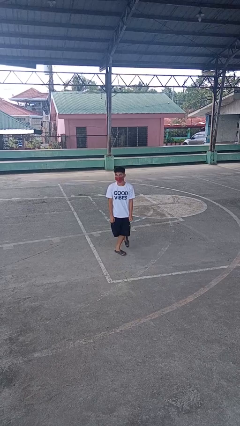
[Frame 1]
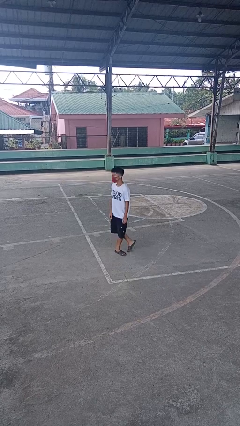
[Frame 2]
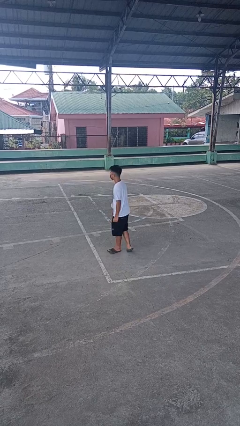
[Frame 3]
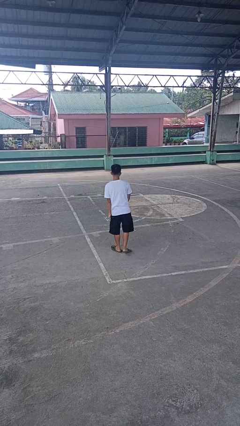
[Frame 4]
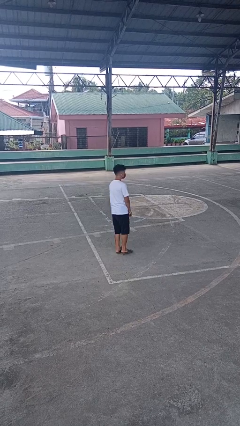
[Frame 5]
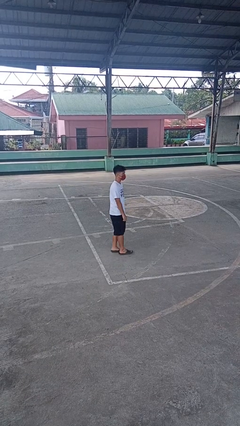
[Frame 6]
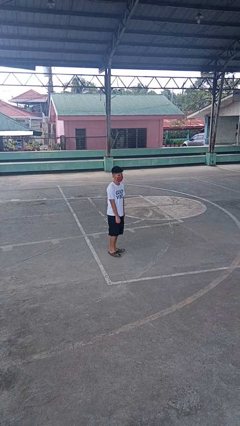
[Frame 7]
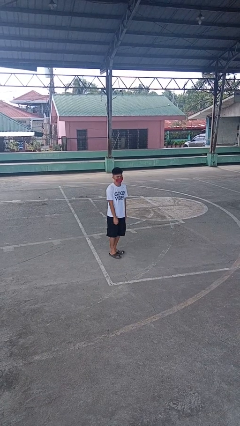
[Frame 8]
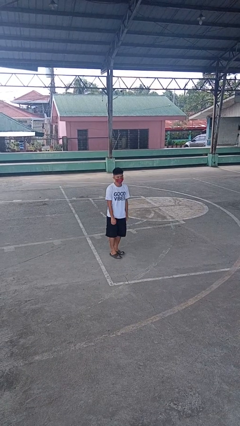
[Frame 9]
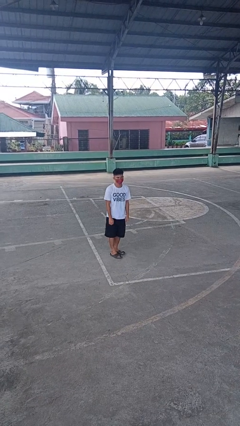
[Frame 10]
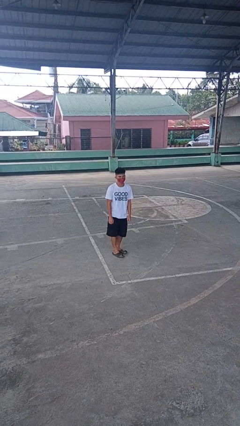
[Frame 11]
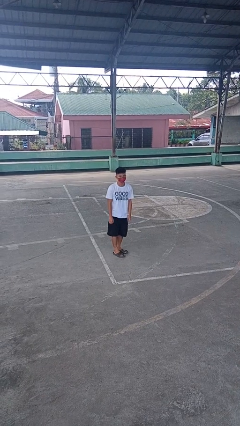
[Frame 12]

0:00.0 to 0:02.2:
person twirls

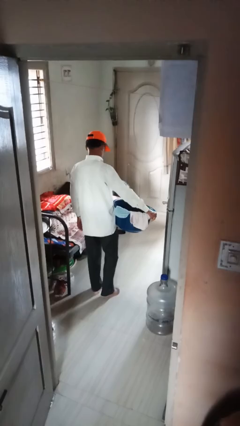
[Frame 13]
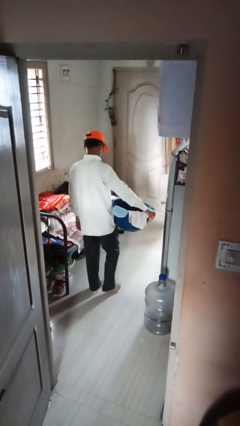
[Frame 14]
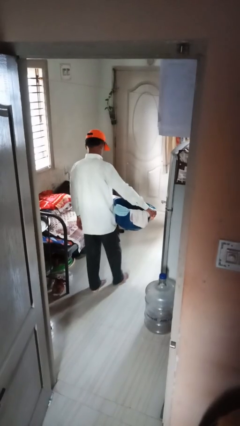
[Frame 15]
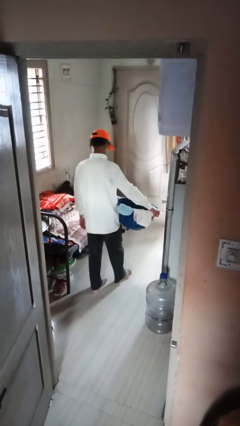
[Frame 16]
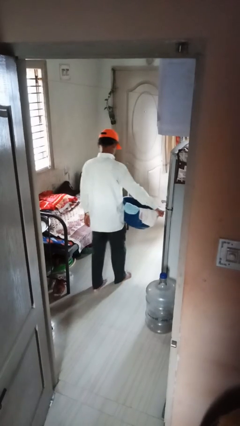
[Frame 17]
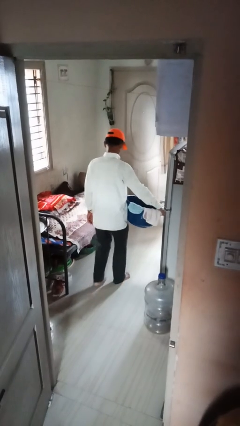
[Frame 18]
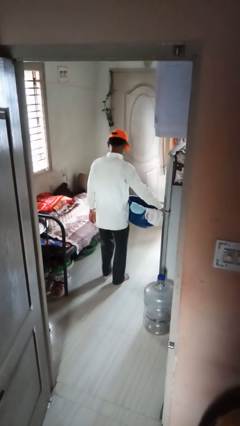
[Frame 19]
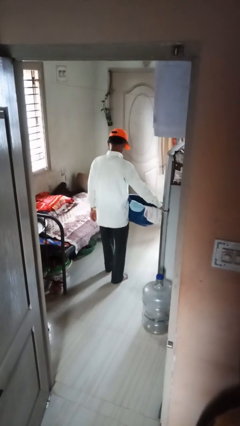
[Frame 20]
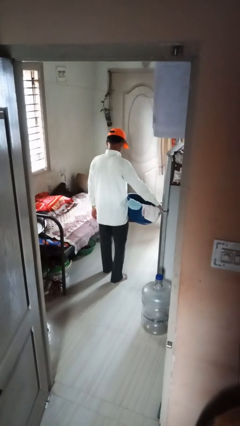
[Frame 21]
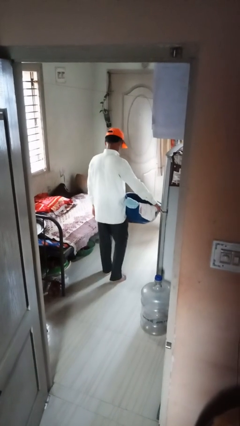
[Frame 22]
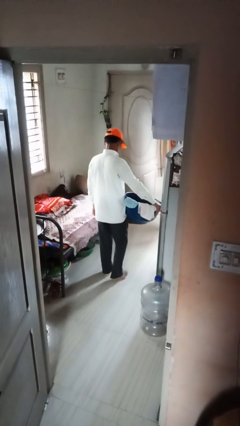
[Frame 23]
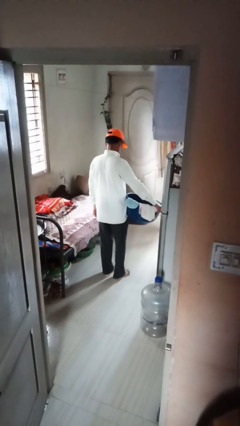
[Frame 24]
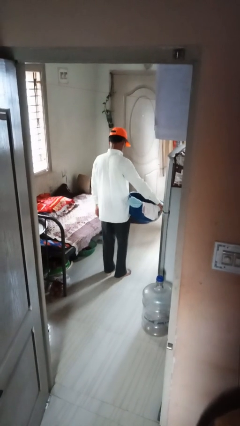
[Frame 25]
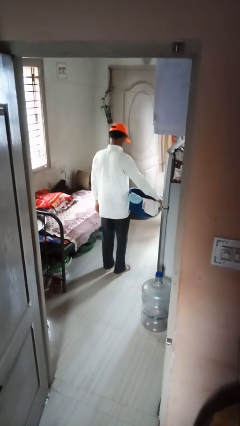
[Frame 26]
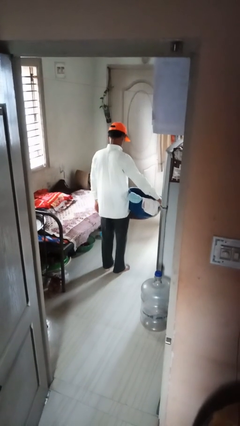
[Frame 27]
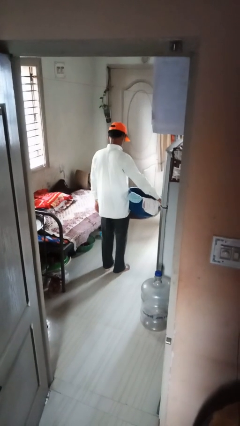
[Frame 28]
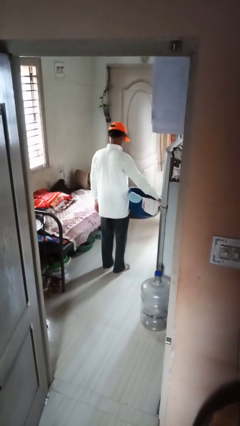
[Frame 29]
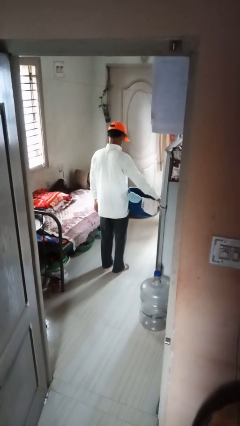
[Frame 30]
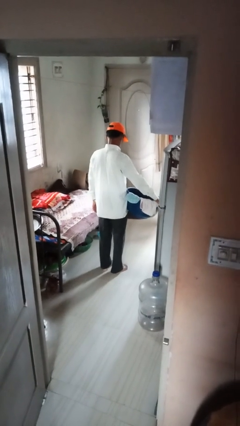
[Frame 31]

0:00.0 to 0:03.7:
person carries laundry basket

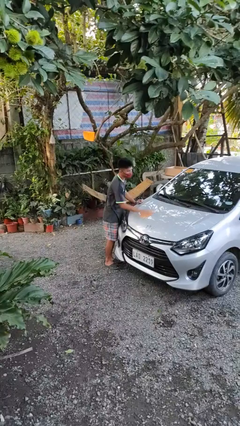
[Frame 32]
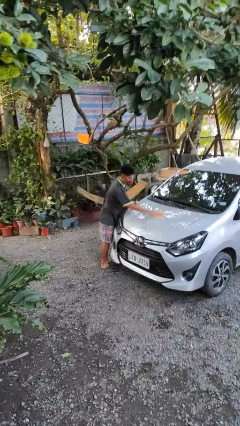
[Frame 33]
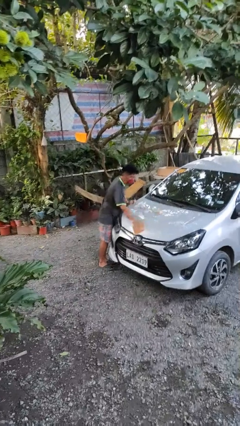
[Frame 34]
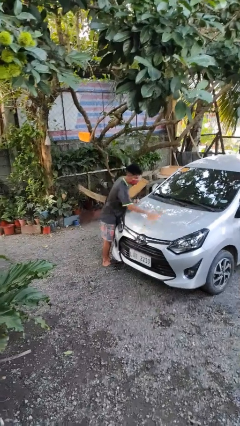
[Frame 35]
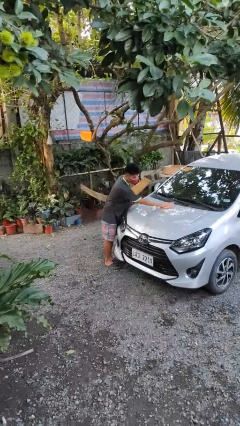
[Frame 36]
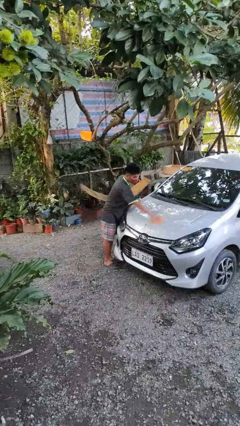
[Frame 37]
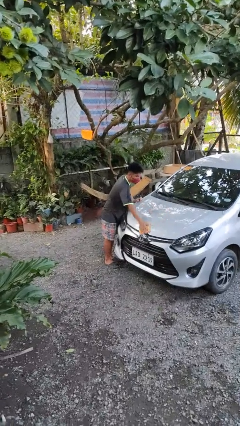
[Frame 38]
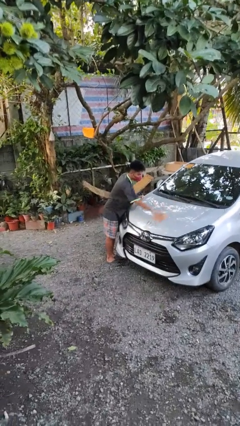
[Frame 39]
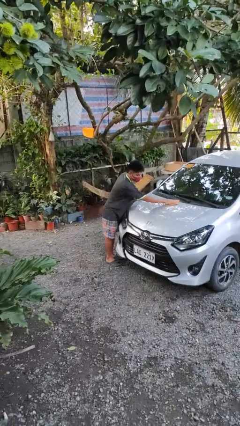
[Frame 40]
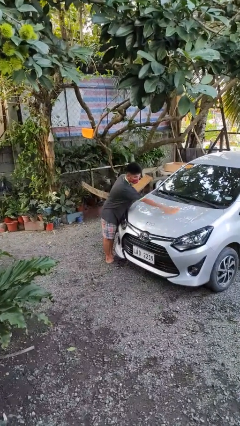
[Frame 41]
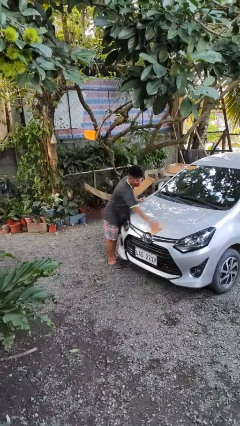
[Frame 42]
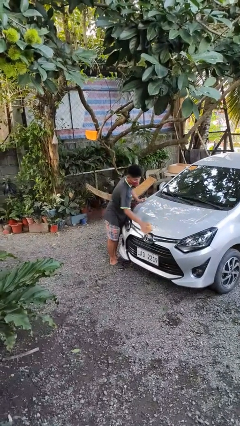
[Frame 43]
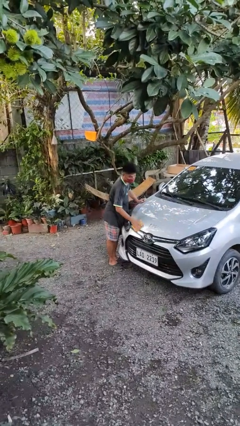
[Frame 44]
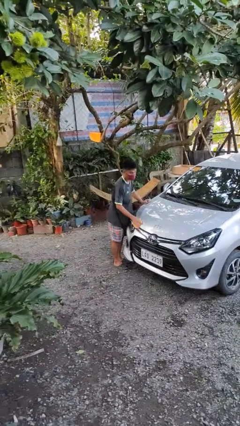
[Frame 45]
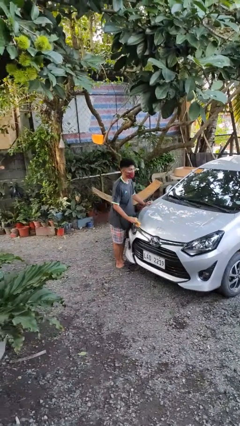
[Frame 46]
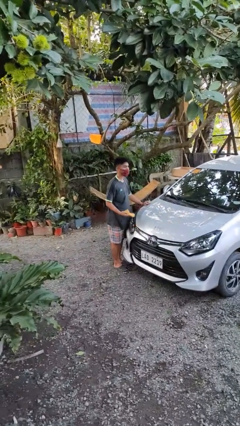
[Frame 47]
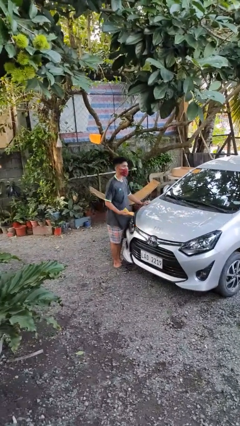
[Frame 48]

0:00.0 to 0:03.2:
person polishes car with rag

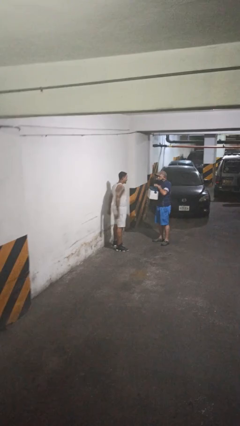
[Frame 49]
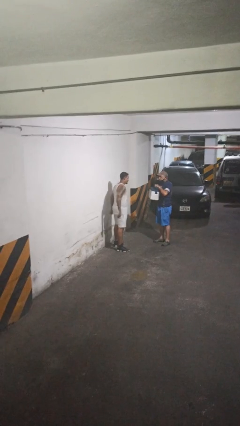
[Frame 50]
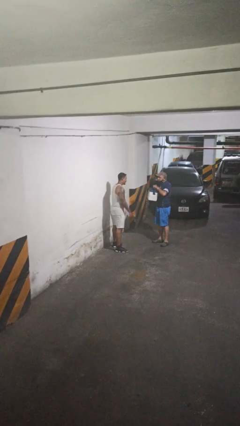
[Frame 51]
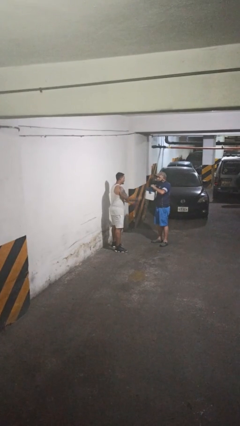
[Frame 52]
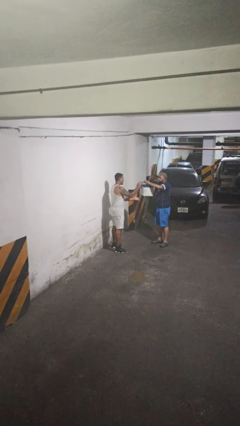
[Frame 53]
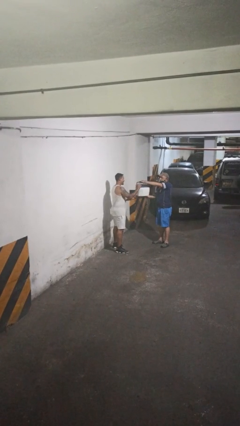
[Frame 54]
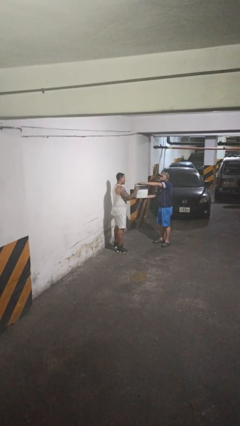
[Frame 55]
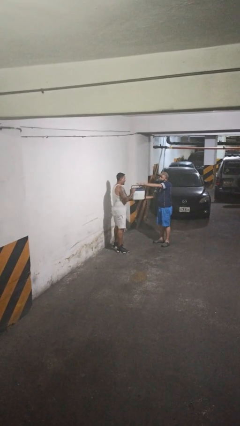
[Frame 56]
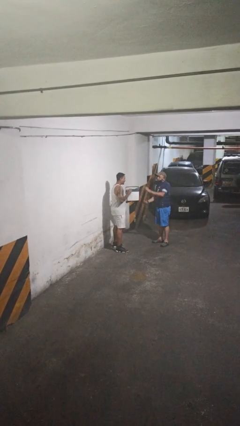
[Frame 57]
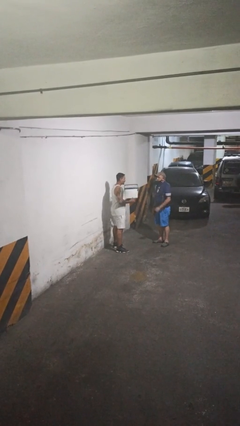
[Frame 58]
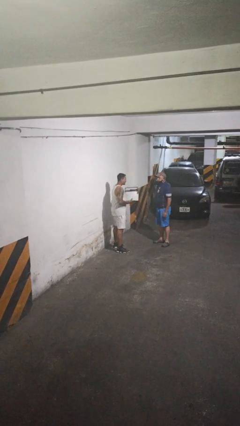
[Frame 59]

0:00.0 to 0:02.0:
person transfers object to person

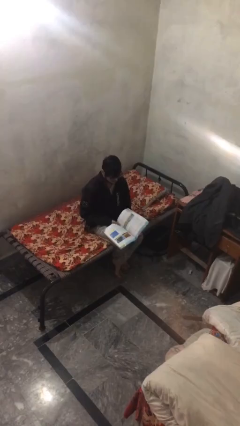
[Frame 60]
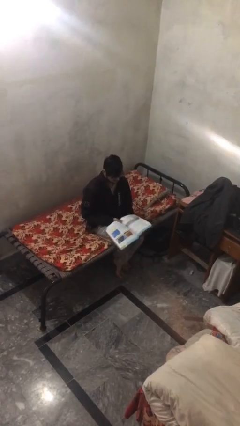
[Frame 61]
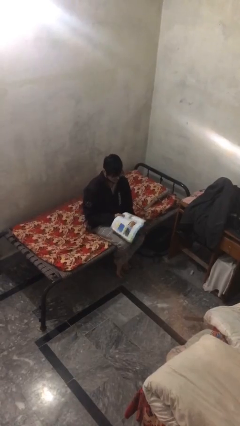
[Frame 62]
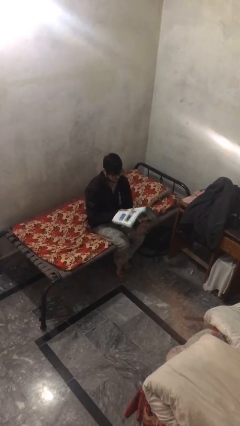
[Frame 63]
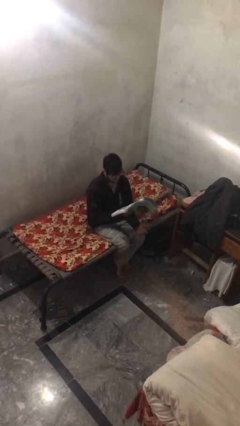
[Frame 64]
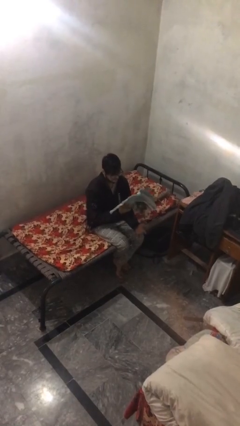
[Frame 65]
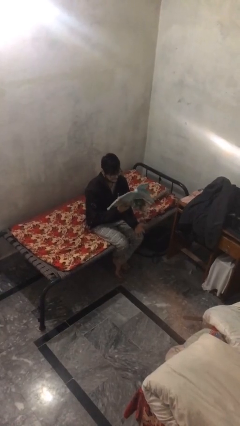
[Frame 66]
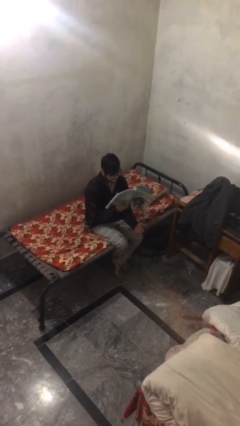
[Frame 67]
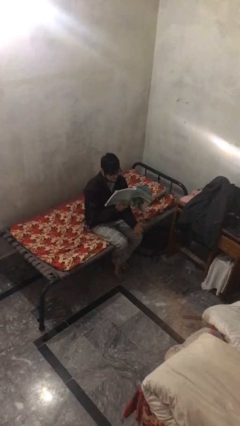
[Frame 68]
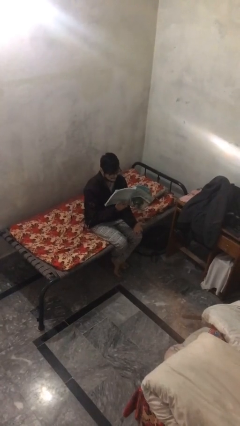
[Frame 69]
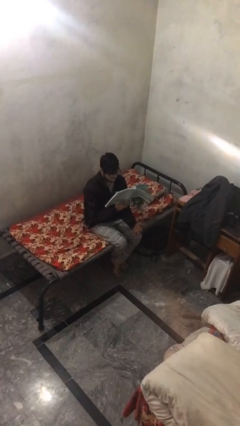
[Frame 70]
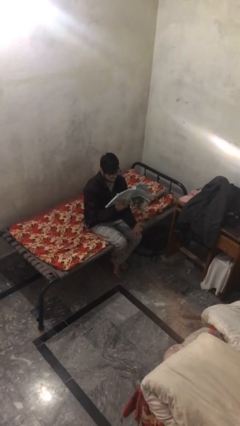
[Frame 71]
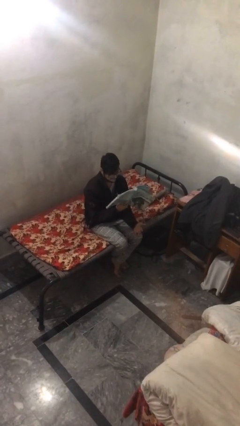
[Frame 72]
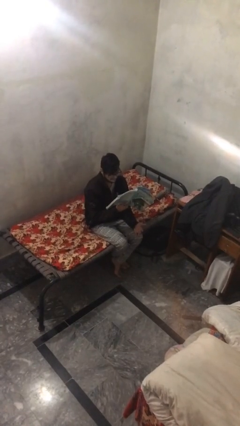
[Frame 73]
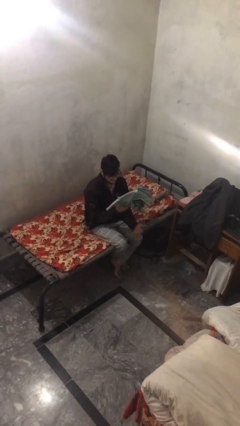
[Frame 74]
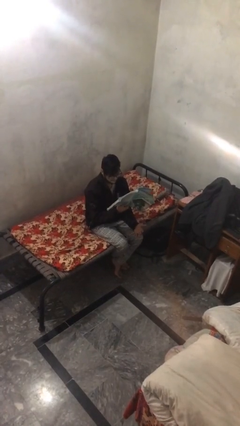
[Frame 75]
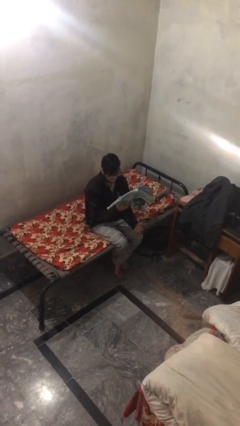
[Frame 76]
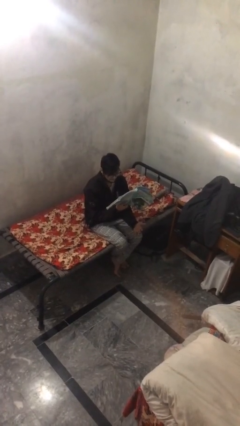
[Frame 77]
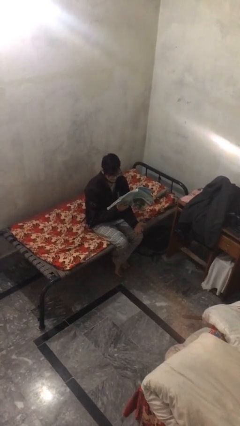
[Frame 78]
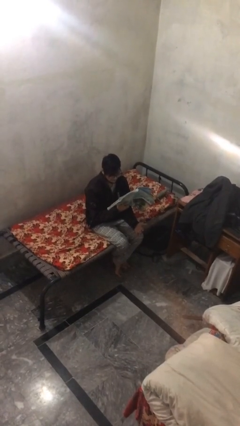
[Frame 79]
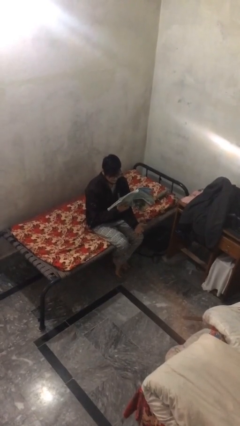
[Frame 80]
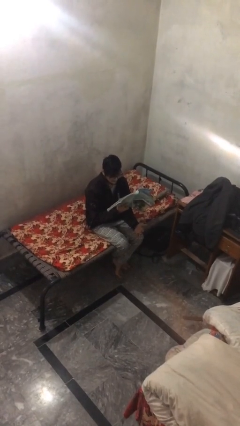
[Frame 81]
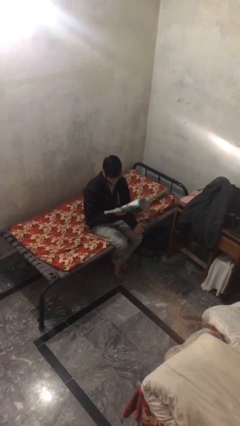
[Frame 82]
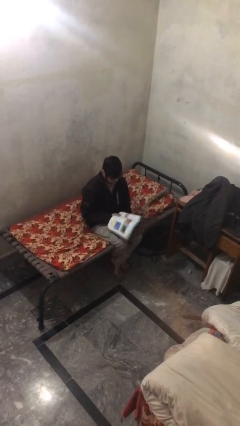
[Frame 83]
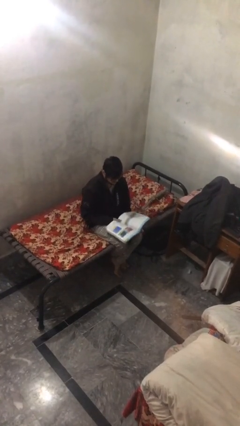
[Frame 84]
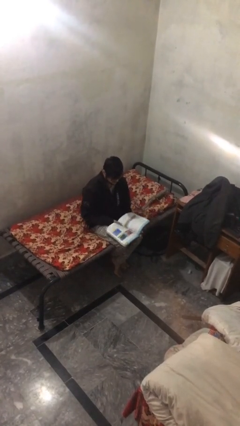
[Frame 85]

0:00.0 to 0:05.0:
person reads document

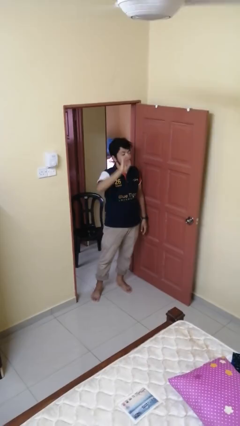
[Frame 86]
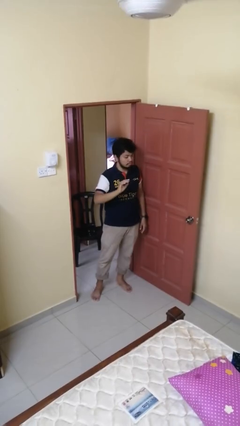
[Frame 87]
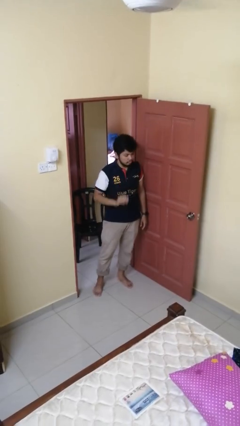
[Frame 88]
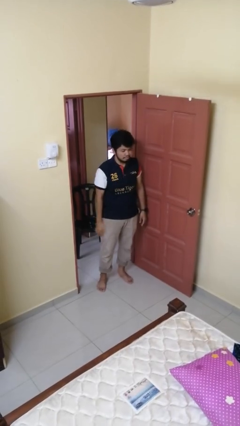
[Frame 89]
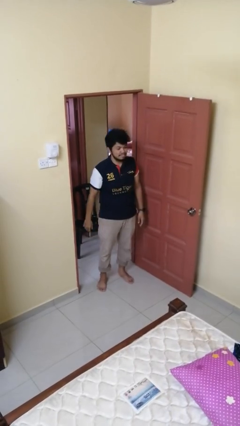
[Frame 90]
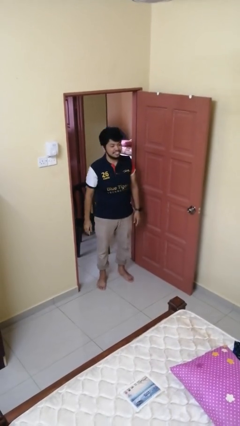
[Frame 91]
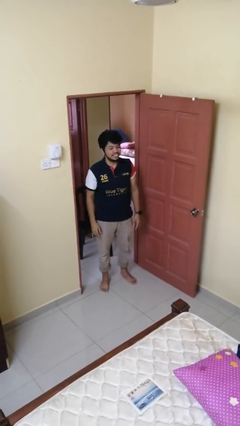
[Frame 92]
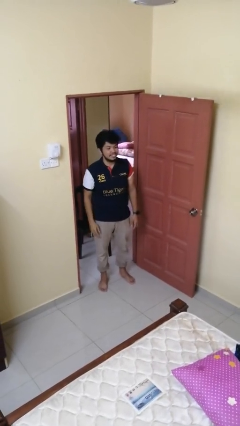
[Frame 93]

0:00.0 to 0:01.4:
person gestures lower hand
